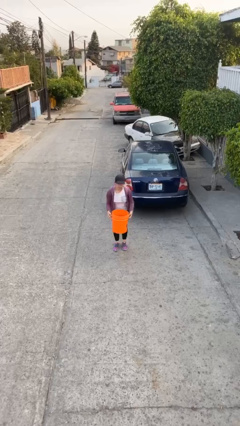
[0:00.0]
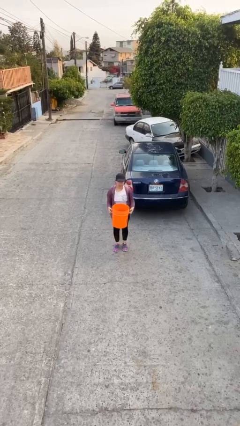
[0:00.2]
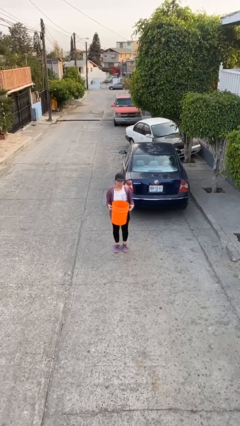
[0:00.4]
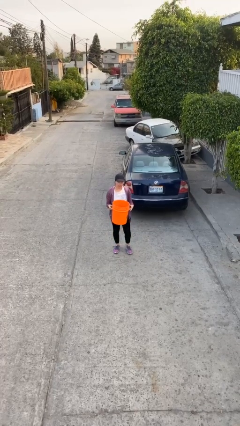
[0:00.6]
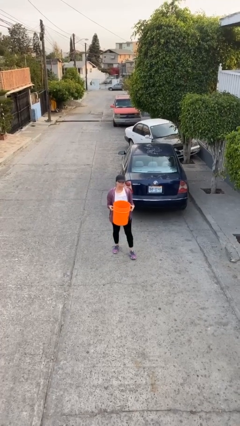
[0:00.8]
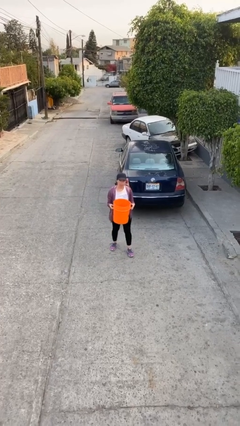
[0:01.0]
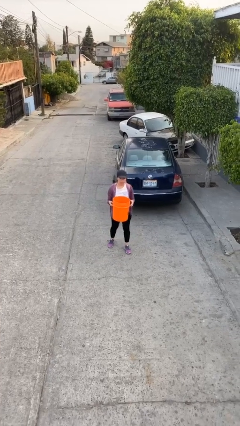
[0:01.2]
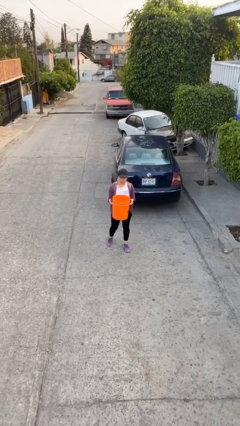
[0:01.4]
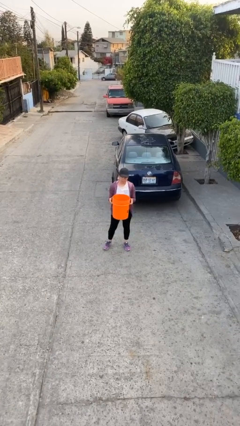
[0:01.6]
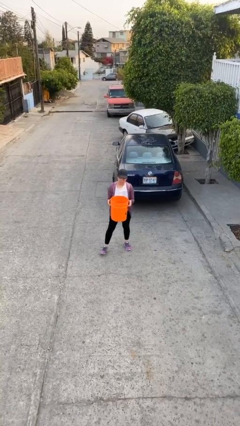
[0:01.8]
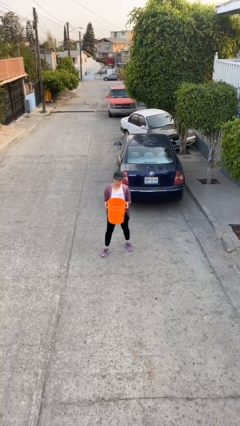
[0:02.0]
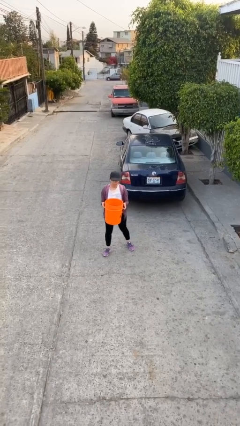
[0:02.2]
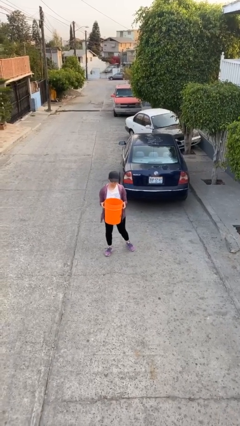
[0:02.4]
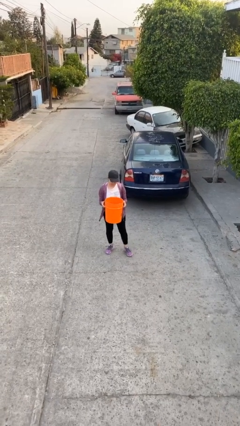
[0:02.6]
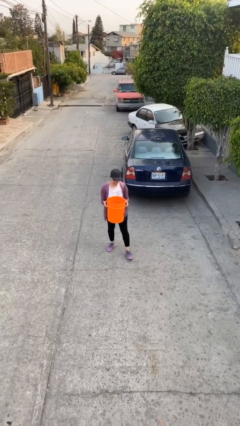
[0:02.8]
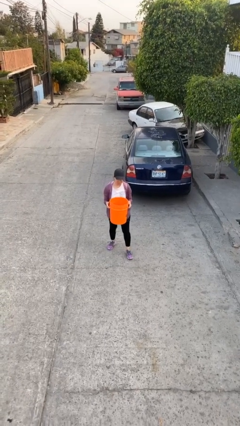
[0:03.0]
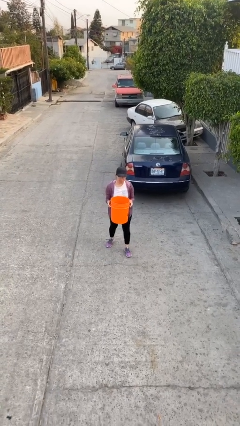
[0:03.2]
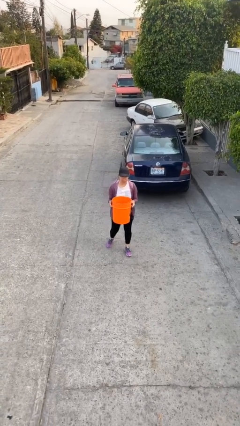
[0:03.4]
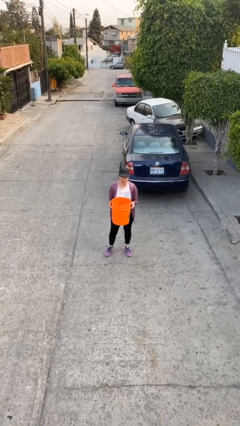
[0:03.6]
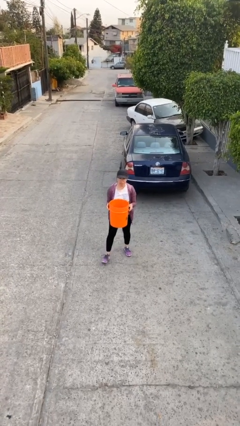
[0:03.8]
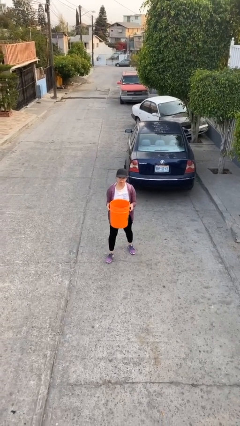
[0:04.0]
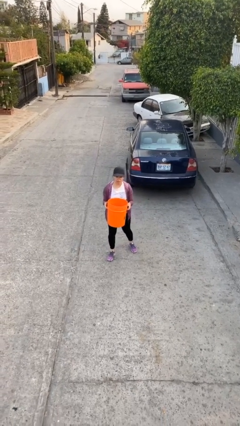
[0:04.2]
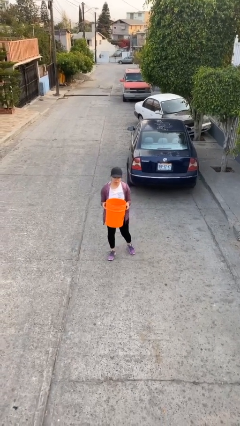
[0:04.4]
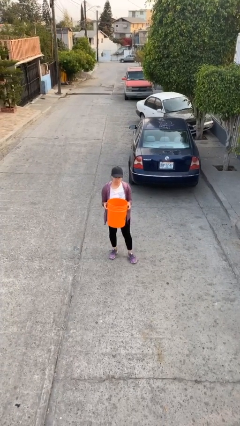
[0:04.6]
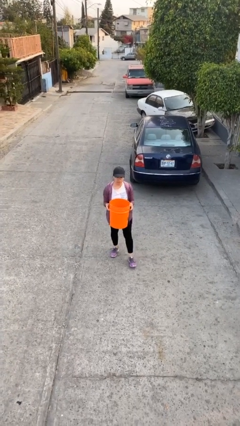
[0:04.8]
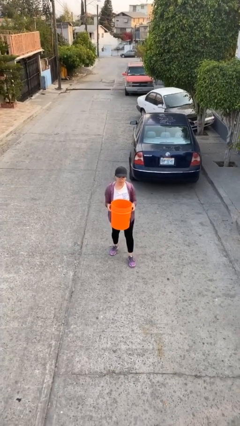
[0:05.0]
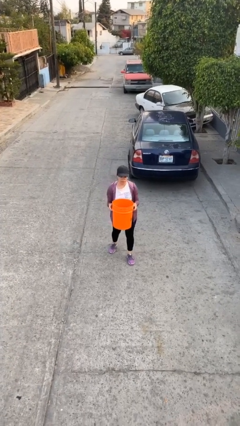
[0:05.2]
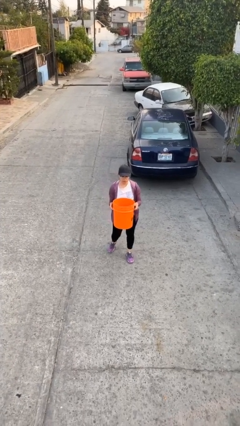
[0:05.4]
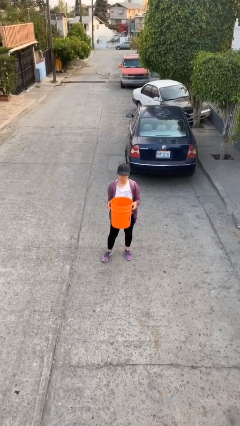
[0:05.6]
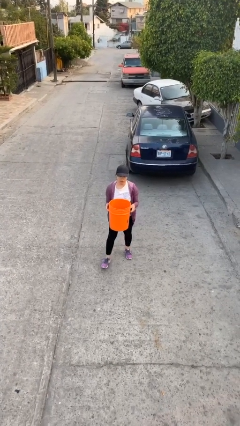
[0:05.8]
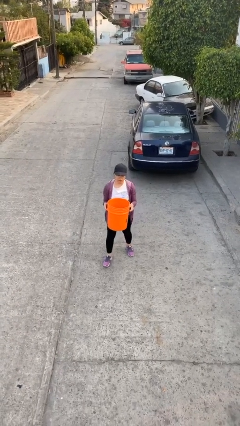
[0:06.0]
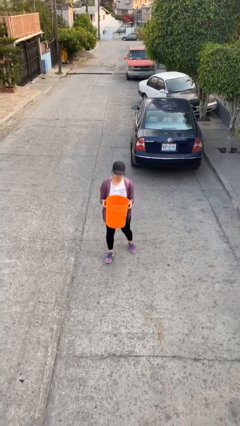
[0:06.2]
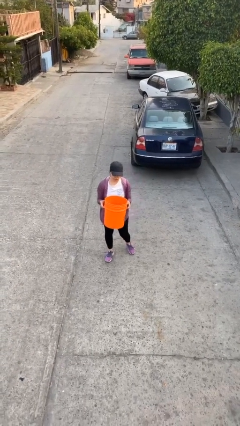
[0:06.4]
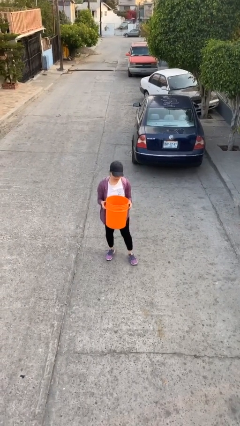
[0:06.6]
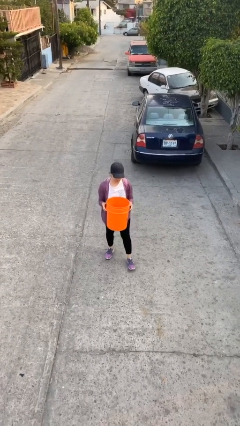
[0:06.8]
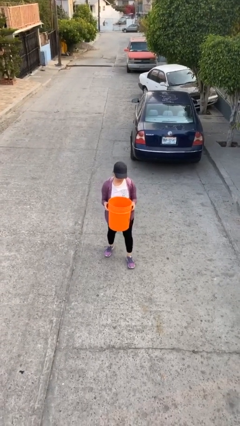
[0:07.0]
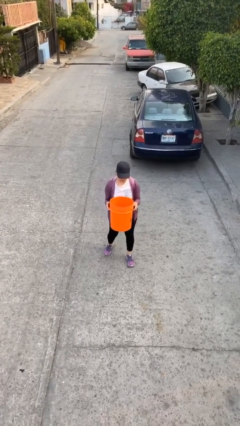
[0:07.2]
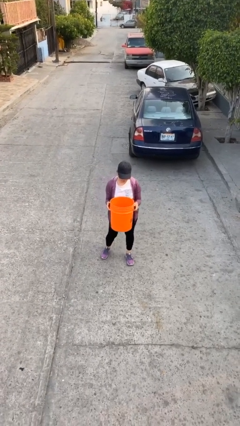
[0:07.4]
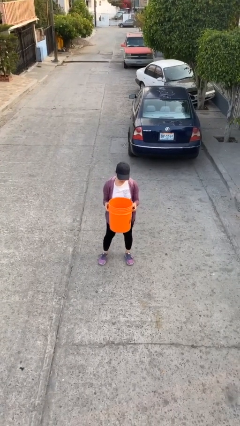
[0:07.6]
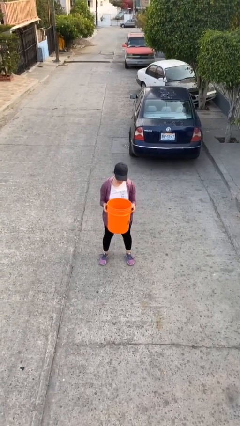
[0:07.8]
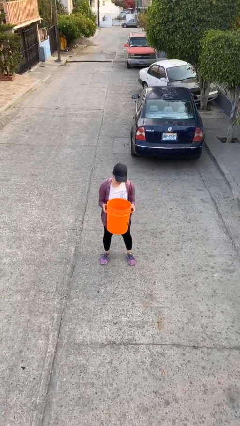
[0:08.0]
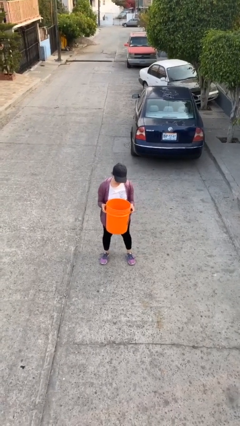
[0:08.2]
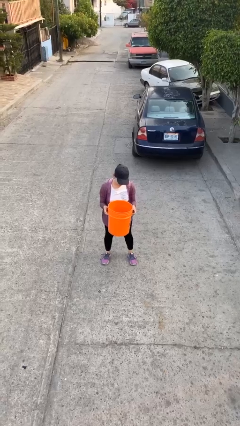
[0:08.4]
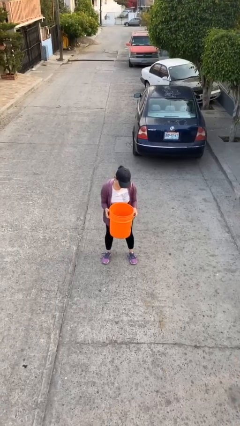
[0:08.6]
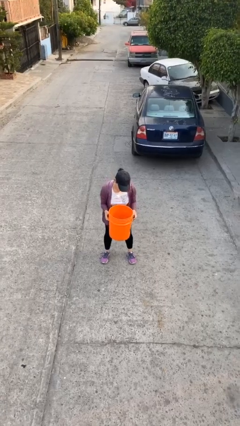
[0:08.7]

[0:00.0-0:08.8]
person carries heavy object

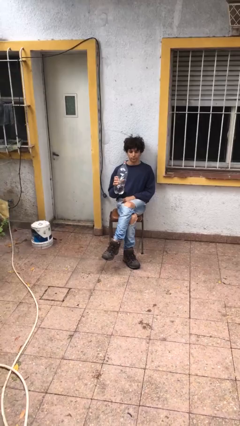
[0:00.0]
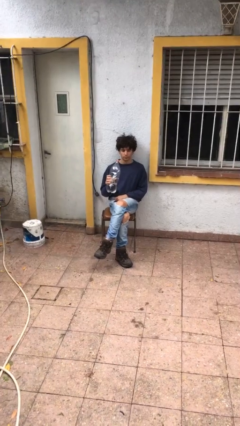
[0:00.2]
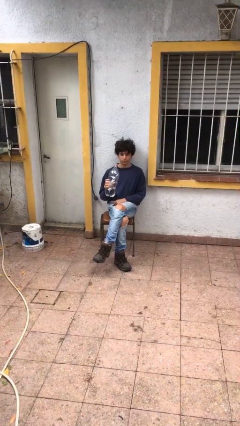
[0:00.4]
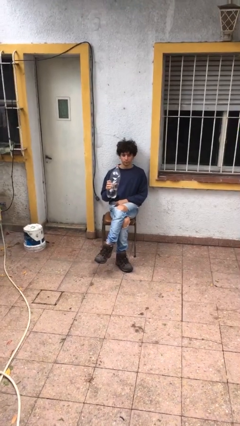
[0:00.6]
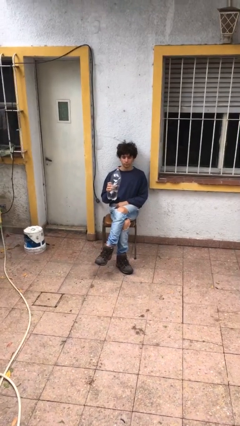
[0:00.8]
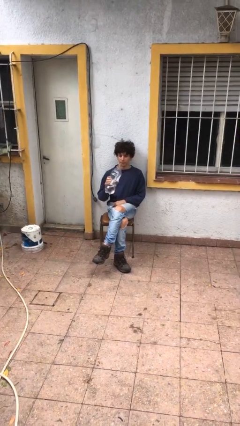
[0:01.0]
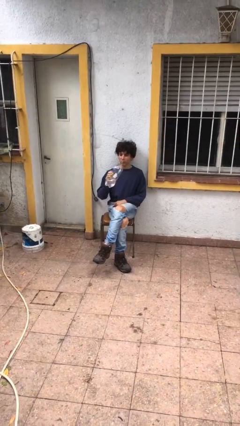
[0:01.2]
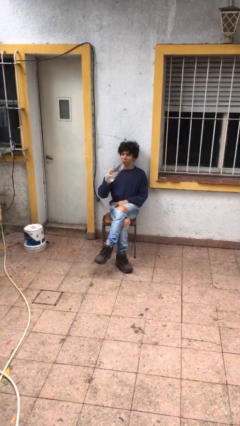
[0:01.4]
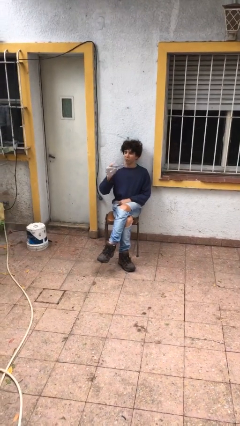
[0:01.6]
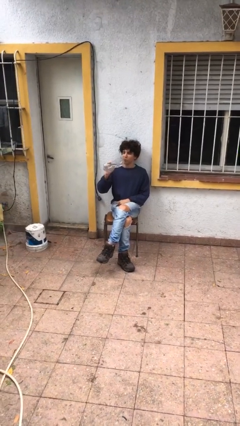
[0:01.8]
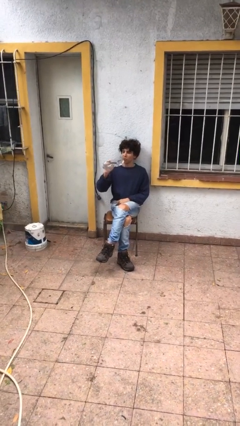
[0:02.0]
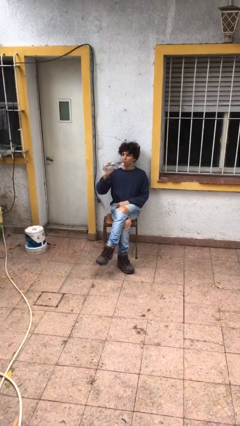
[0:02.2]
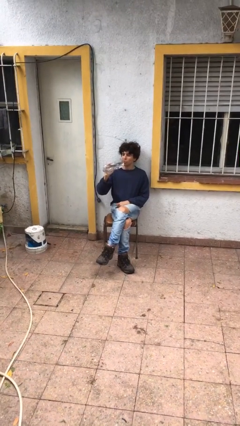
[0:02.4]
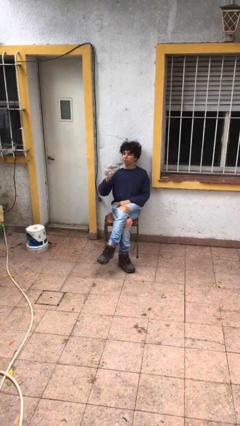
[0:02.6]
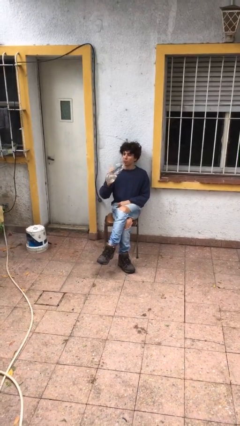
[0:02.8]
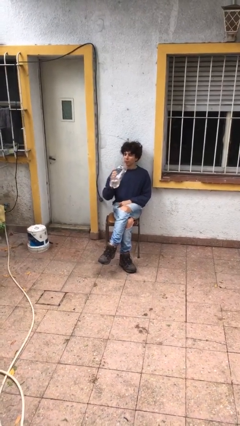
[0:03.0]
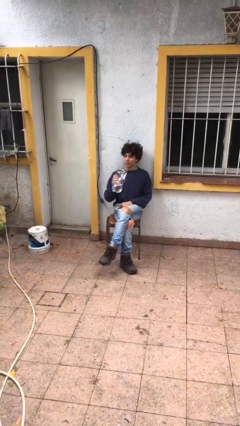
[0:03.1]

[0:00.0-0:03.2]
person drinks from bottle

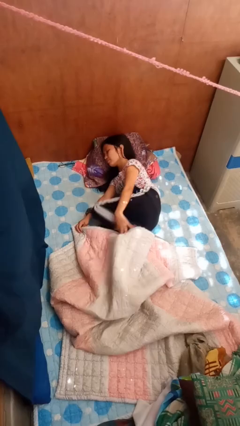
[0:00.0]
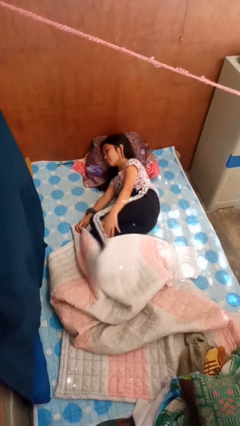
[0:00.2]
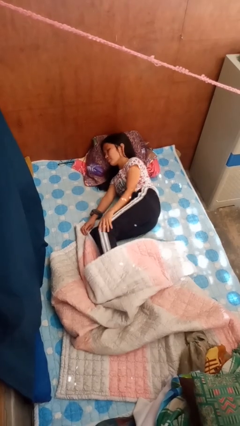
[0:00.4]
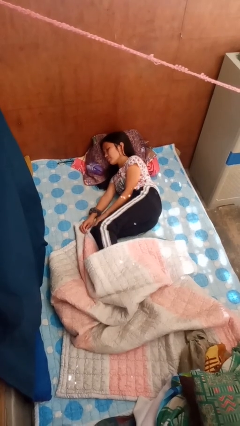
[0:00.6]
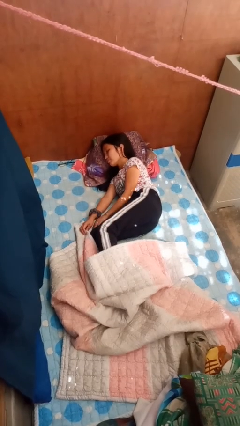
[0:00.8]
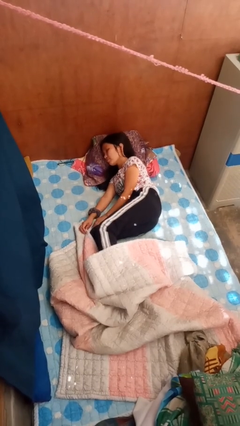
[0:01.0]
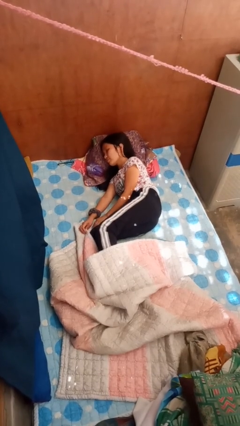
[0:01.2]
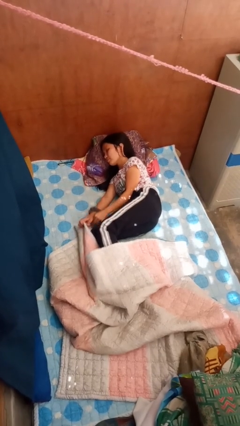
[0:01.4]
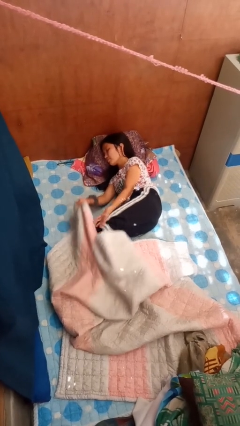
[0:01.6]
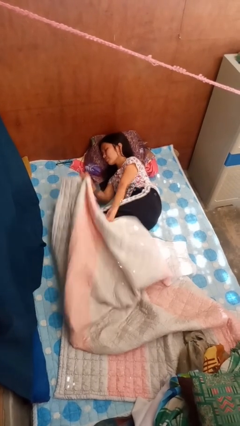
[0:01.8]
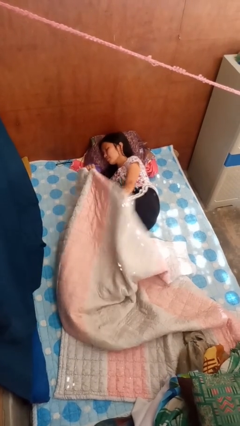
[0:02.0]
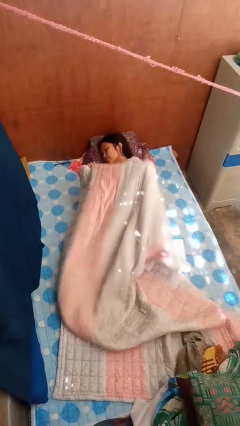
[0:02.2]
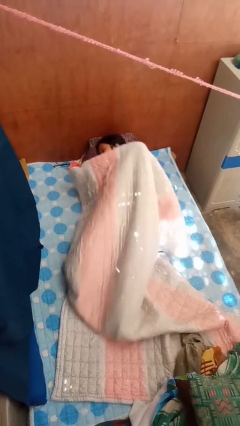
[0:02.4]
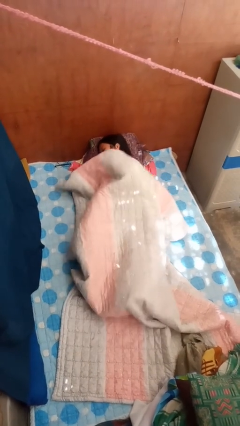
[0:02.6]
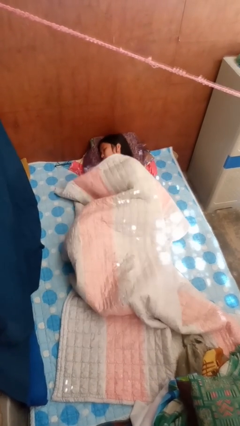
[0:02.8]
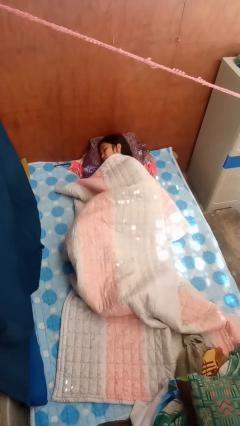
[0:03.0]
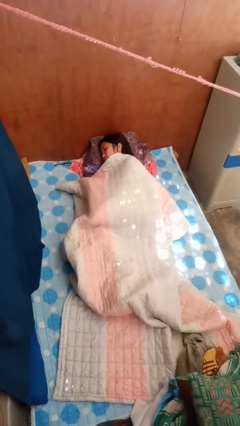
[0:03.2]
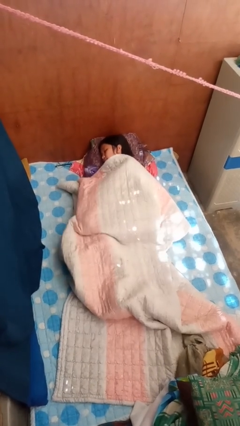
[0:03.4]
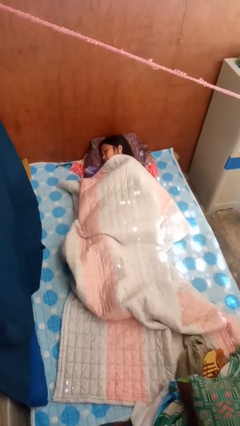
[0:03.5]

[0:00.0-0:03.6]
person covers with bedsheets

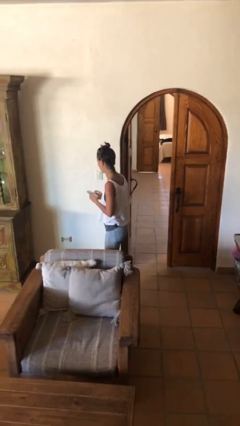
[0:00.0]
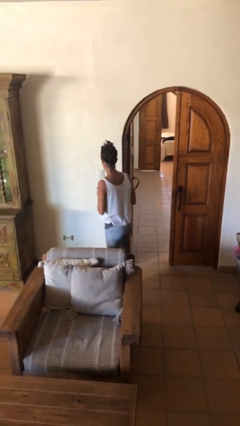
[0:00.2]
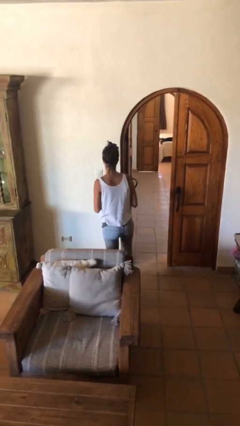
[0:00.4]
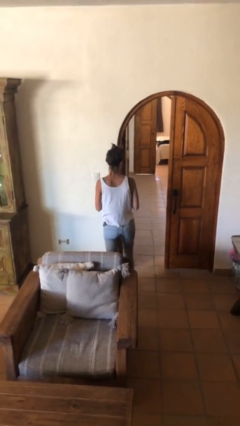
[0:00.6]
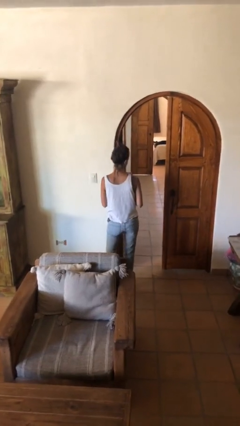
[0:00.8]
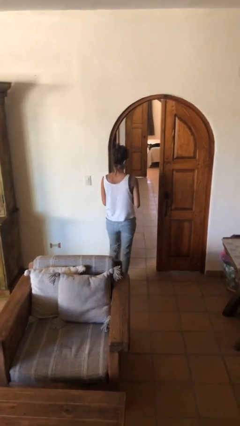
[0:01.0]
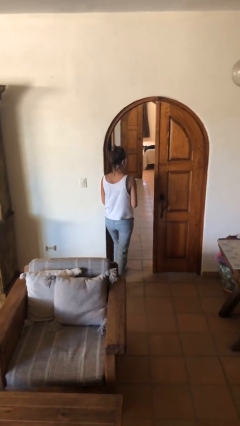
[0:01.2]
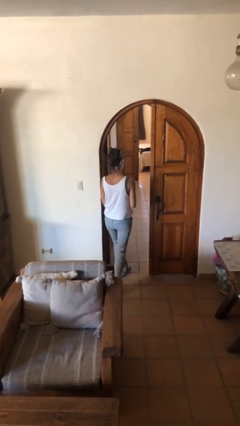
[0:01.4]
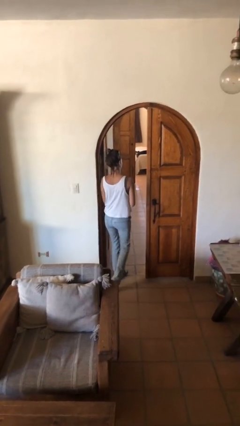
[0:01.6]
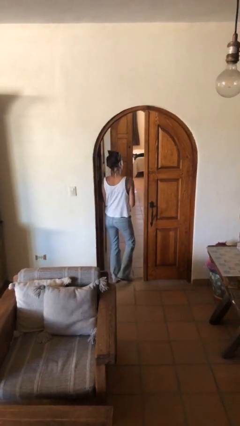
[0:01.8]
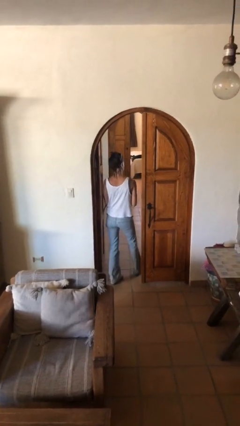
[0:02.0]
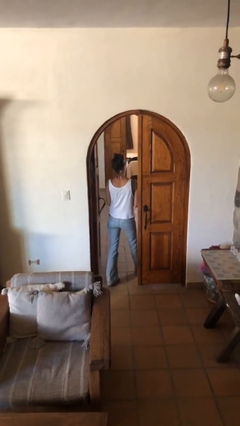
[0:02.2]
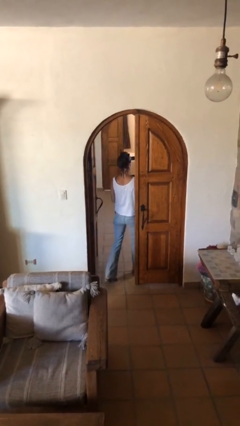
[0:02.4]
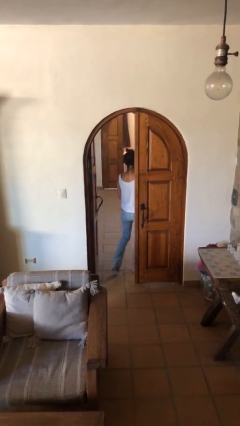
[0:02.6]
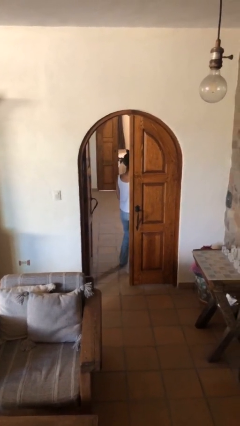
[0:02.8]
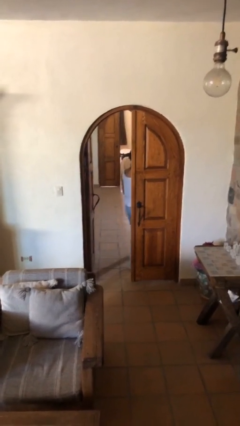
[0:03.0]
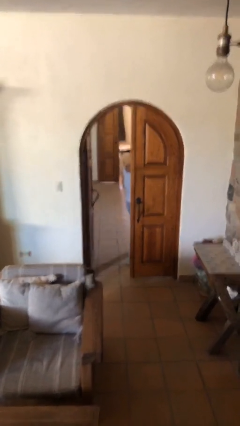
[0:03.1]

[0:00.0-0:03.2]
person exits scene through structure
